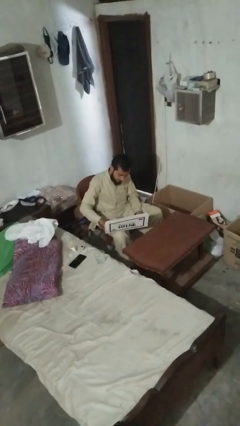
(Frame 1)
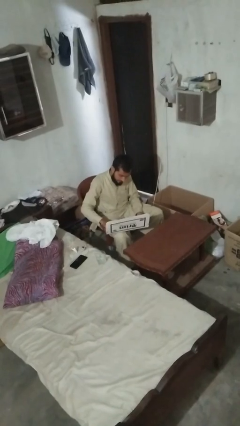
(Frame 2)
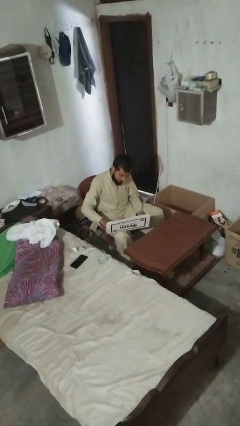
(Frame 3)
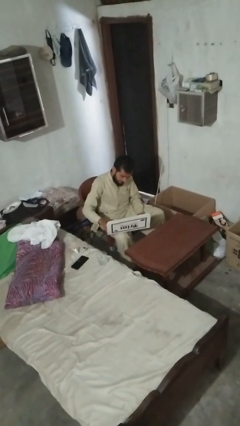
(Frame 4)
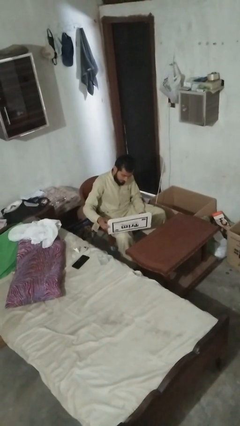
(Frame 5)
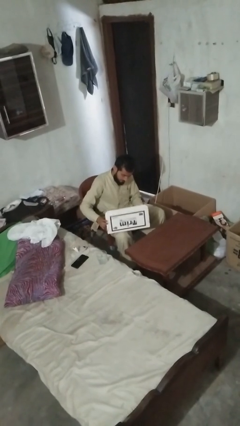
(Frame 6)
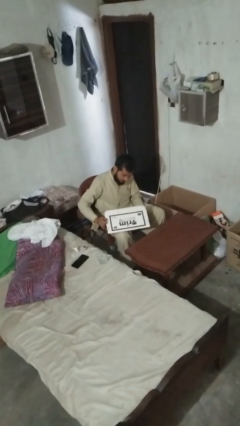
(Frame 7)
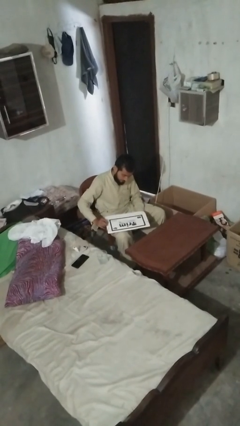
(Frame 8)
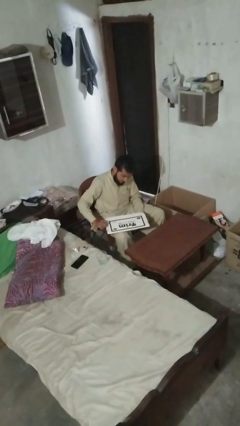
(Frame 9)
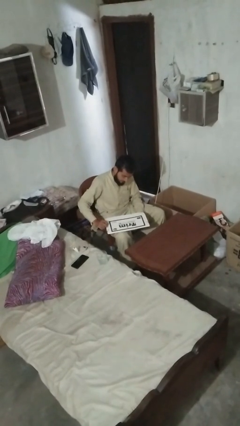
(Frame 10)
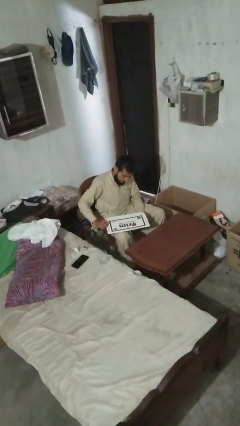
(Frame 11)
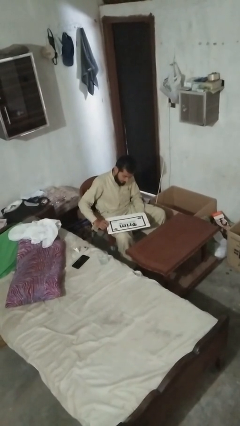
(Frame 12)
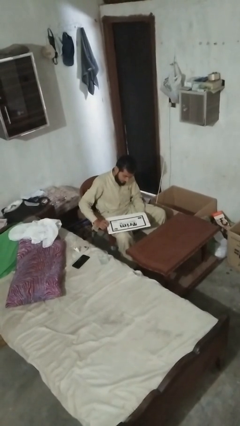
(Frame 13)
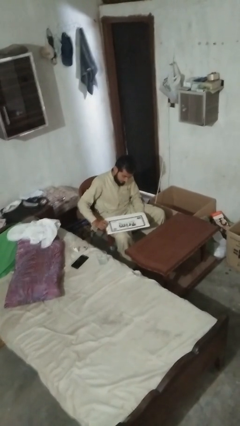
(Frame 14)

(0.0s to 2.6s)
person closes laptop

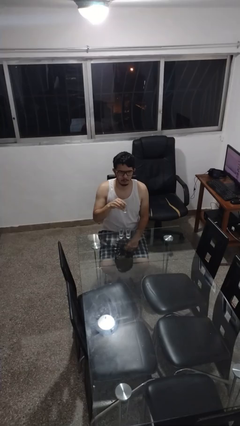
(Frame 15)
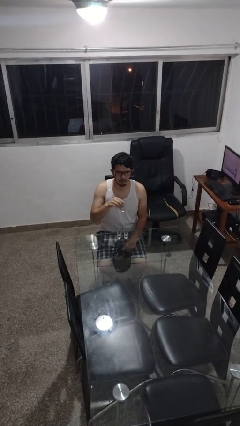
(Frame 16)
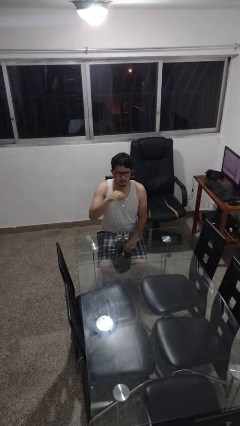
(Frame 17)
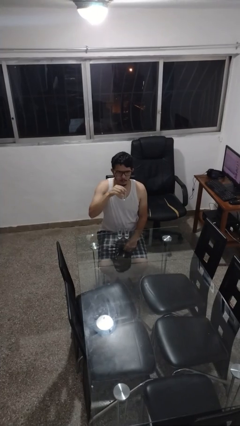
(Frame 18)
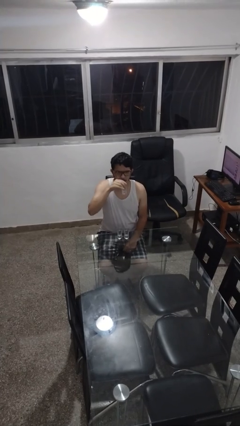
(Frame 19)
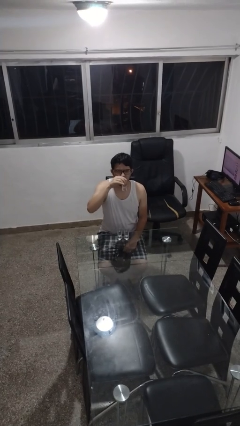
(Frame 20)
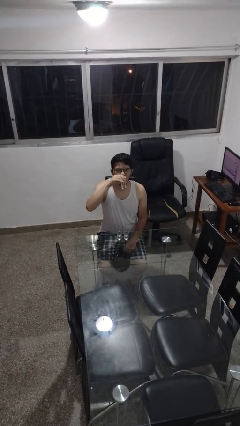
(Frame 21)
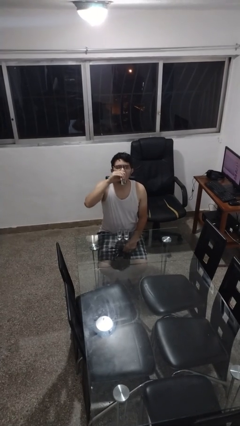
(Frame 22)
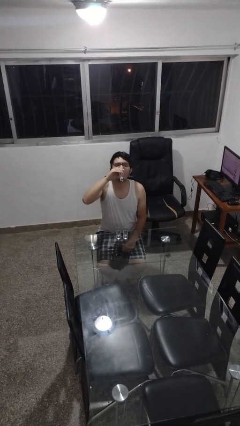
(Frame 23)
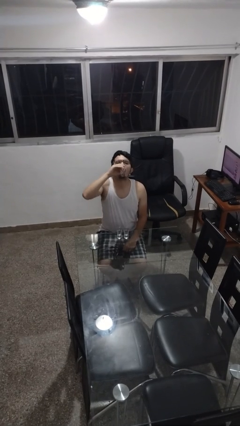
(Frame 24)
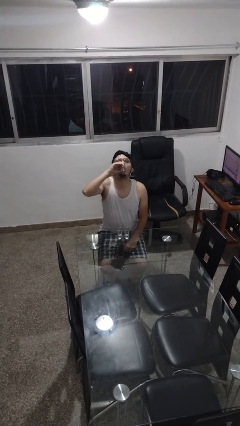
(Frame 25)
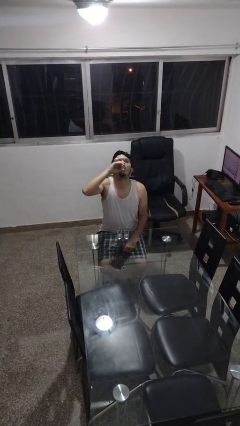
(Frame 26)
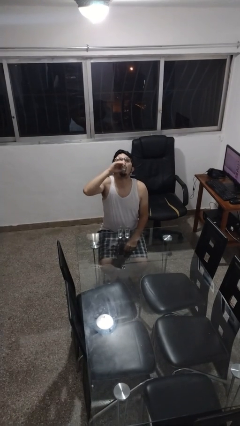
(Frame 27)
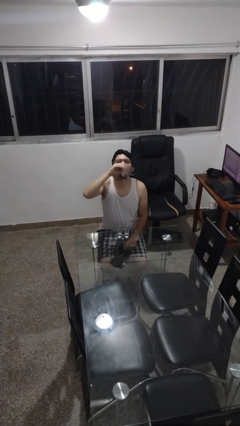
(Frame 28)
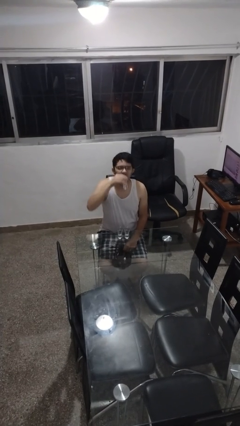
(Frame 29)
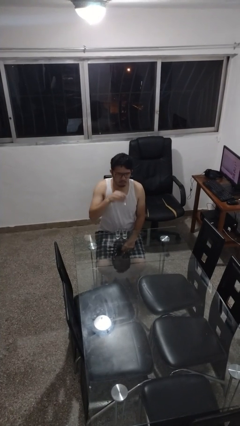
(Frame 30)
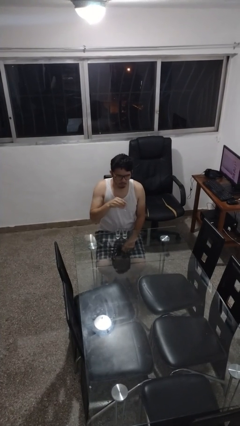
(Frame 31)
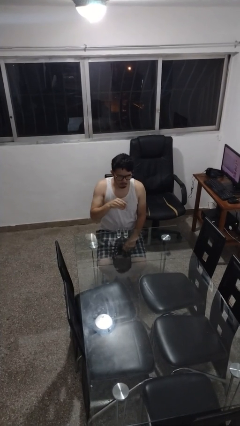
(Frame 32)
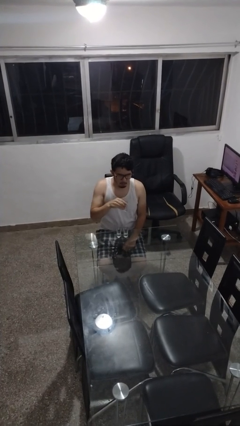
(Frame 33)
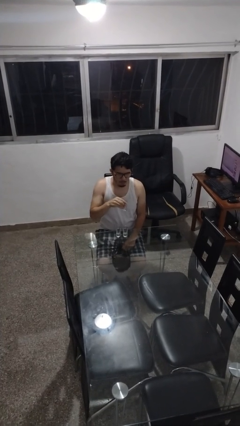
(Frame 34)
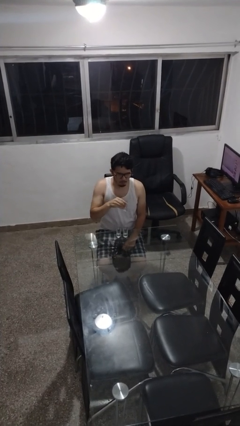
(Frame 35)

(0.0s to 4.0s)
person drinks from shotglass

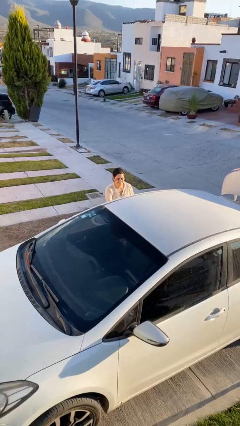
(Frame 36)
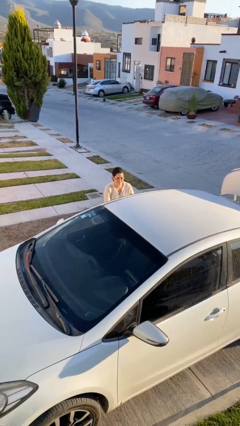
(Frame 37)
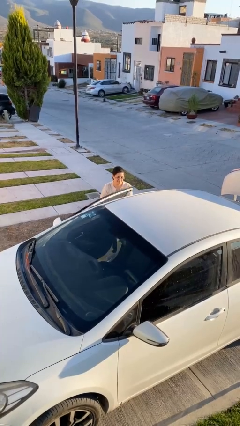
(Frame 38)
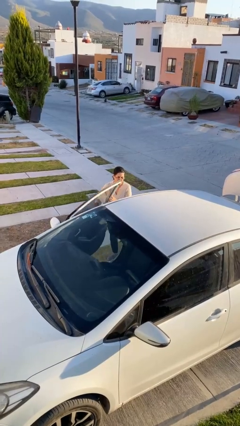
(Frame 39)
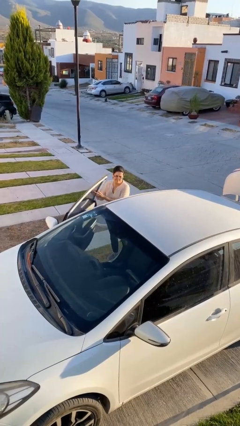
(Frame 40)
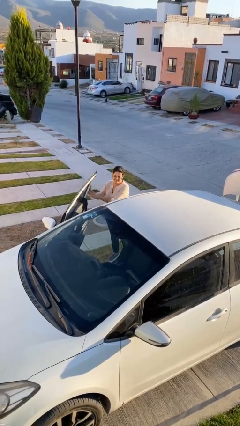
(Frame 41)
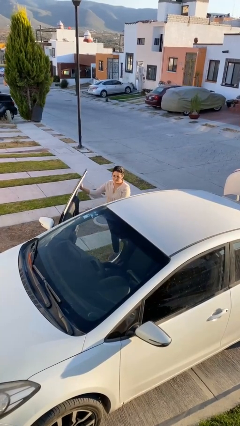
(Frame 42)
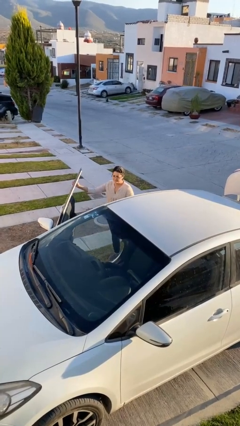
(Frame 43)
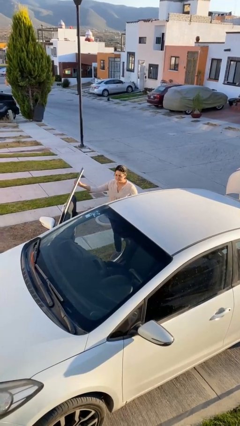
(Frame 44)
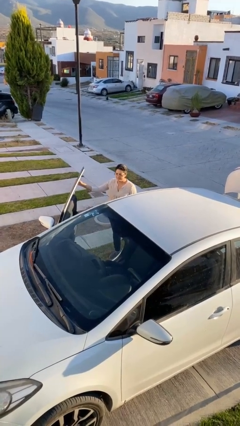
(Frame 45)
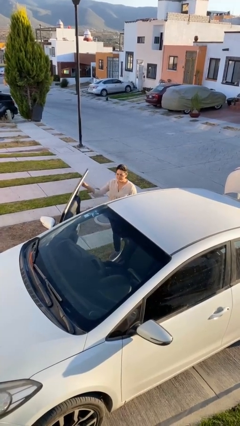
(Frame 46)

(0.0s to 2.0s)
person opens car door

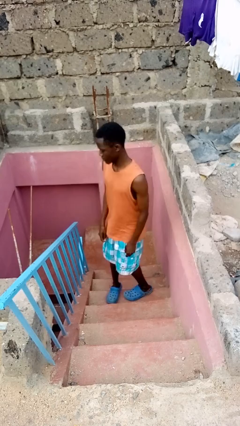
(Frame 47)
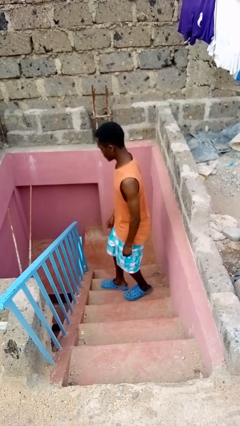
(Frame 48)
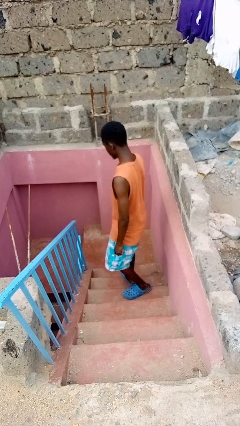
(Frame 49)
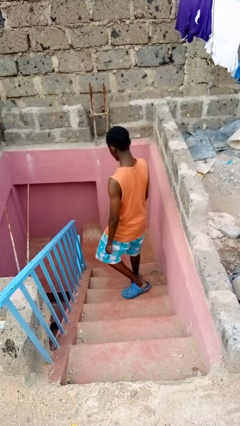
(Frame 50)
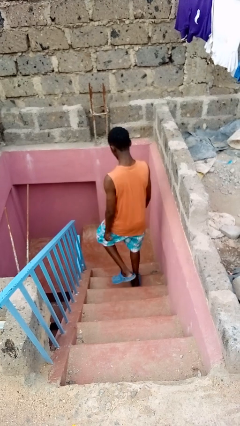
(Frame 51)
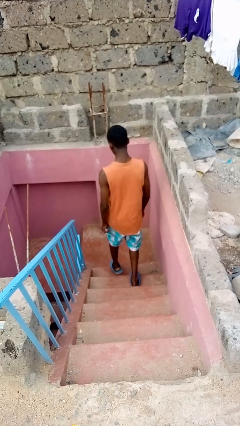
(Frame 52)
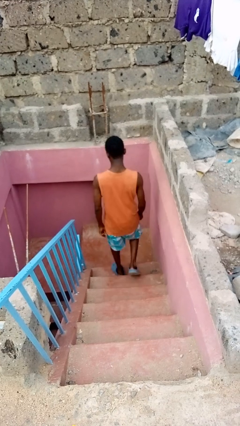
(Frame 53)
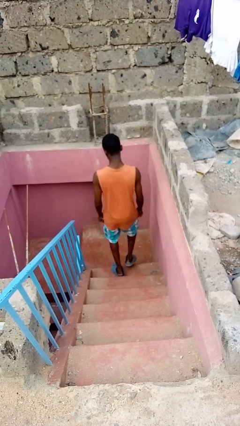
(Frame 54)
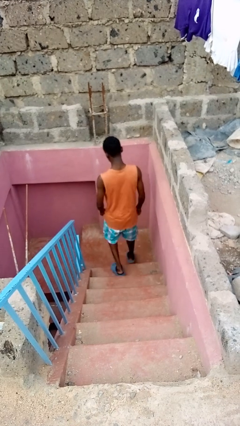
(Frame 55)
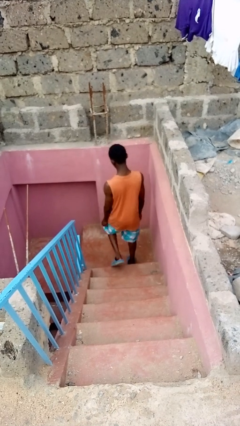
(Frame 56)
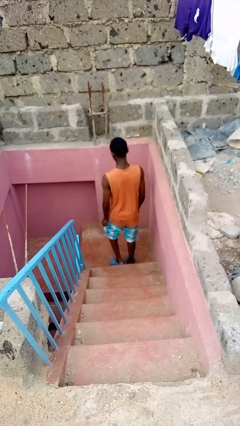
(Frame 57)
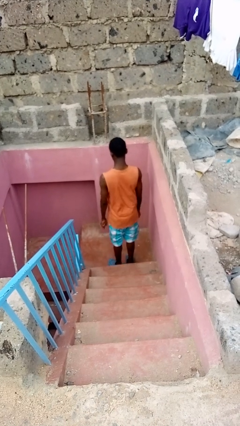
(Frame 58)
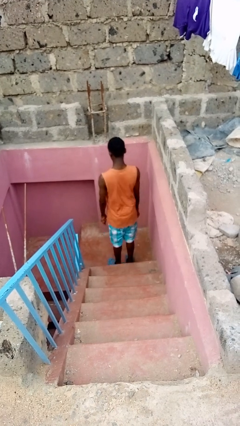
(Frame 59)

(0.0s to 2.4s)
person climbs down stairs

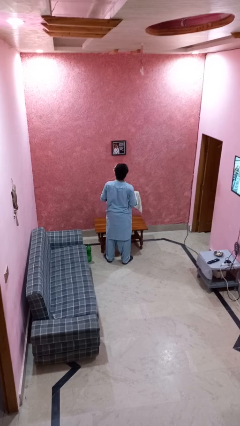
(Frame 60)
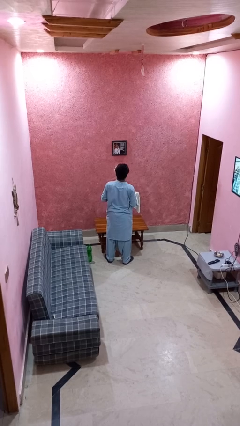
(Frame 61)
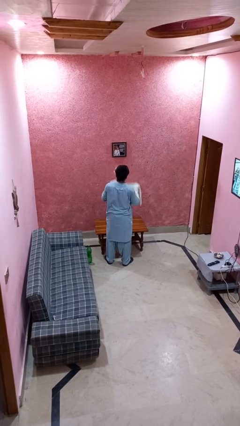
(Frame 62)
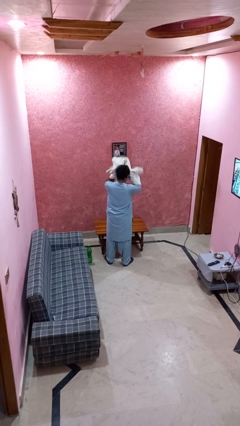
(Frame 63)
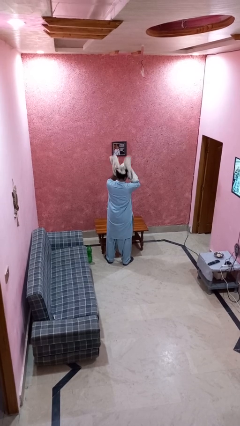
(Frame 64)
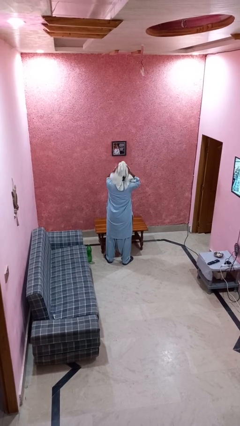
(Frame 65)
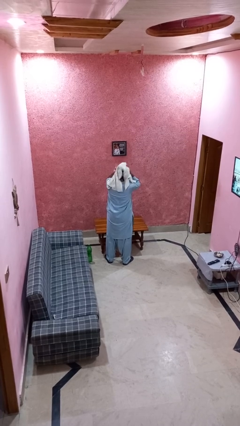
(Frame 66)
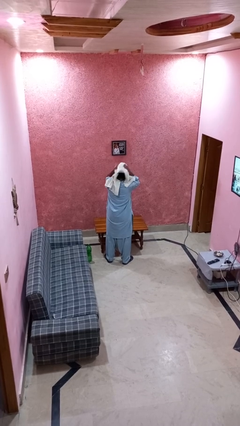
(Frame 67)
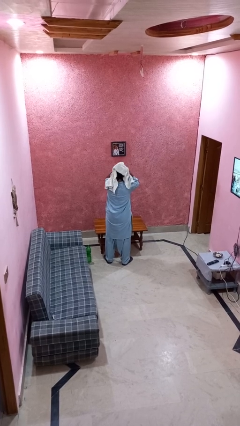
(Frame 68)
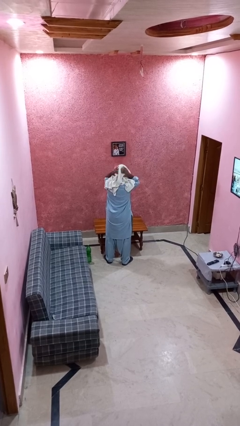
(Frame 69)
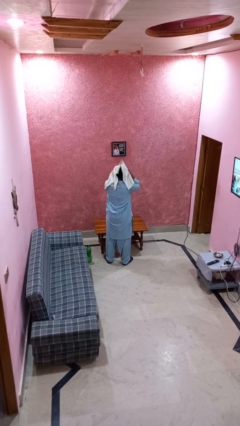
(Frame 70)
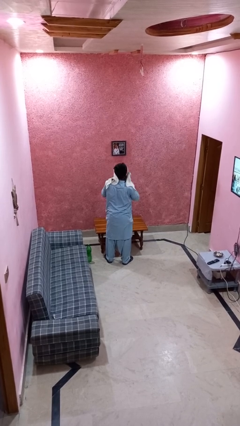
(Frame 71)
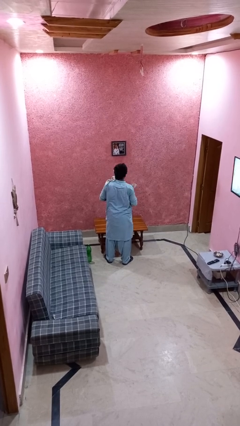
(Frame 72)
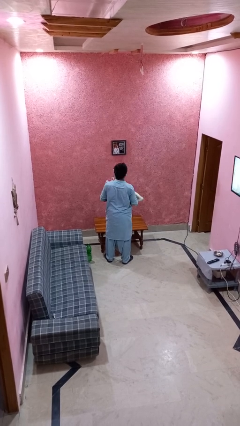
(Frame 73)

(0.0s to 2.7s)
person dries hair with towel

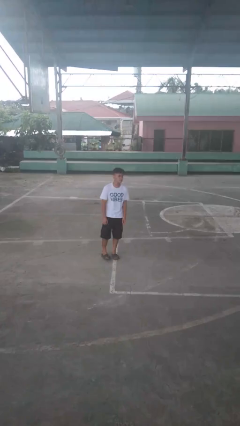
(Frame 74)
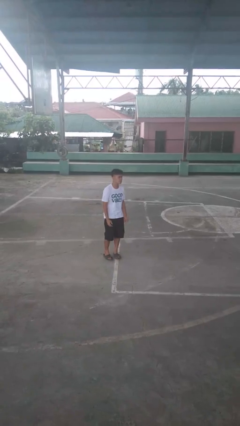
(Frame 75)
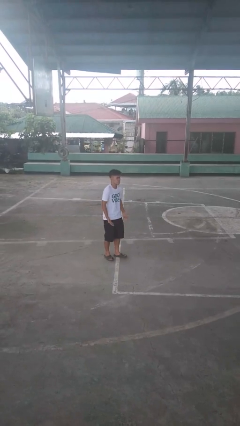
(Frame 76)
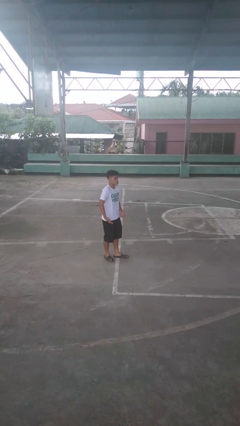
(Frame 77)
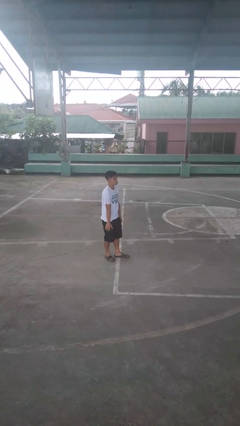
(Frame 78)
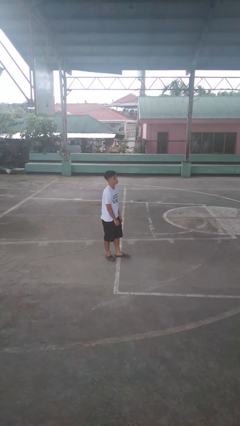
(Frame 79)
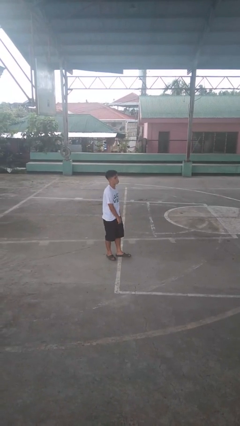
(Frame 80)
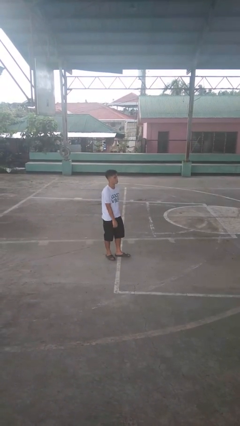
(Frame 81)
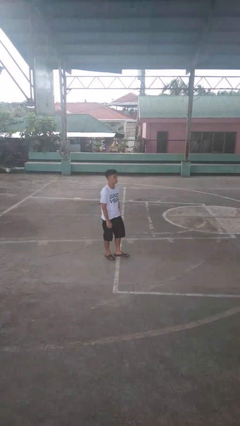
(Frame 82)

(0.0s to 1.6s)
person shrugs

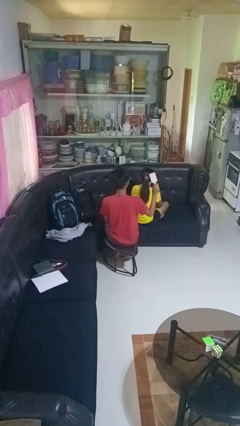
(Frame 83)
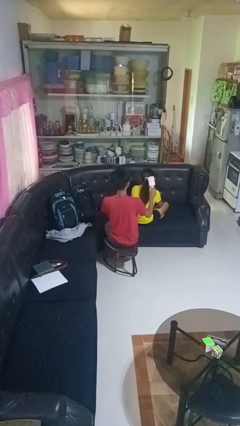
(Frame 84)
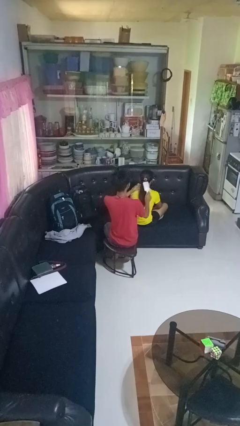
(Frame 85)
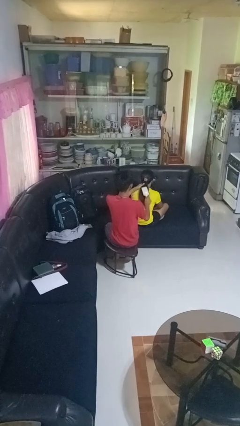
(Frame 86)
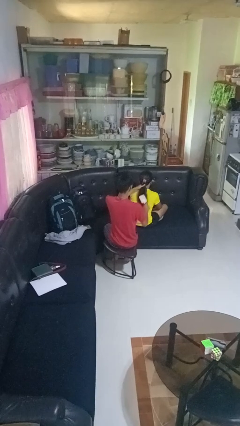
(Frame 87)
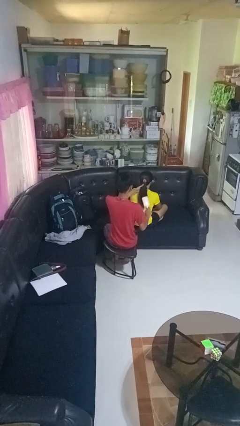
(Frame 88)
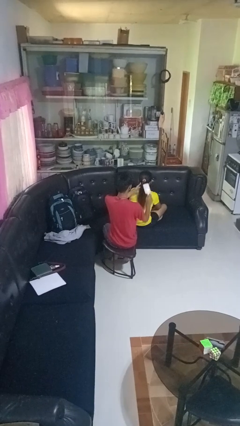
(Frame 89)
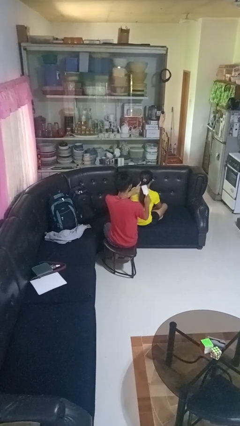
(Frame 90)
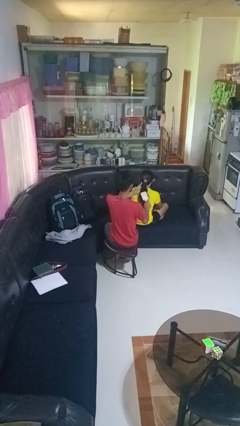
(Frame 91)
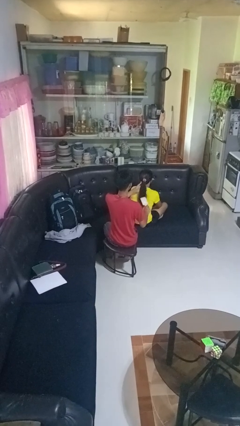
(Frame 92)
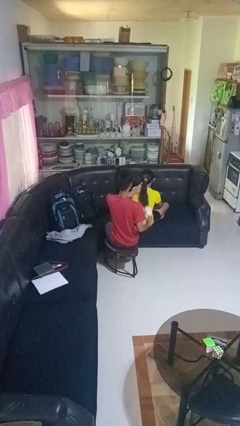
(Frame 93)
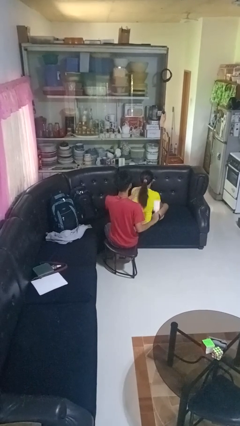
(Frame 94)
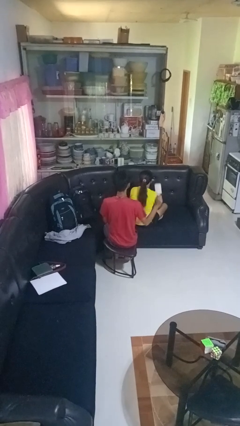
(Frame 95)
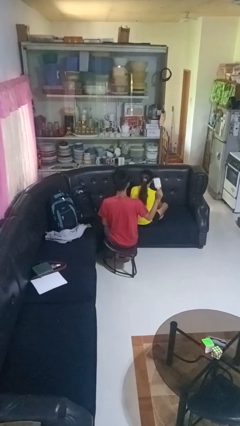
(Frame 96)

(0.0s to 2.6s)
person brushes hair of person
